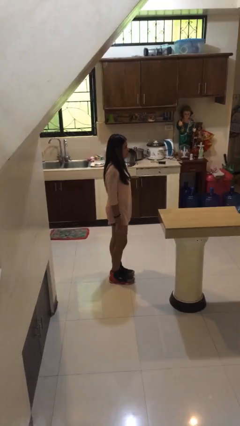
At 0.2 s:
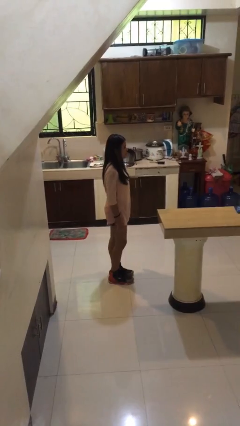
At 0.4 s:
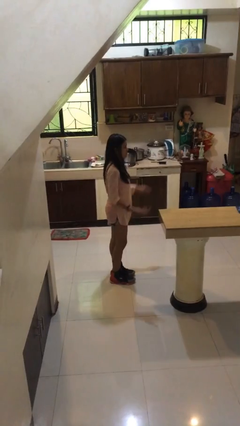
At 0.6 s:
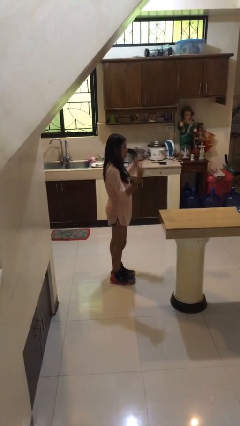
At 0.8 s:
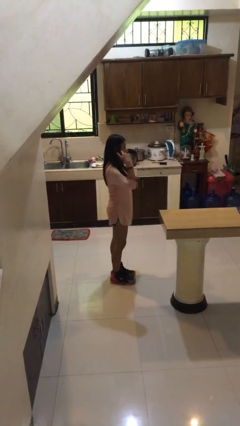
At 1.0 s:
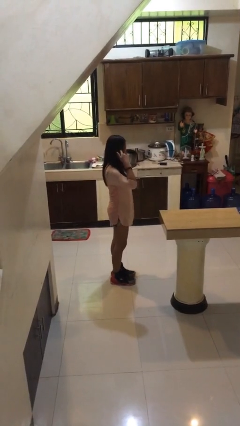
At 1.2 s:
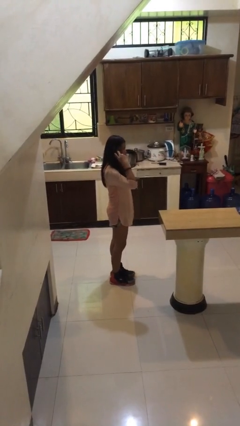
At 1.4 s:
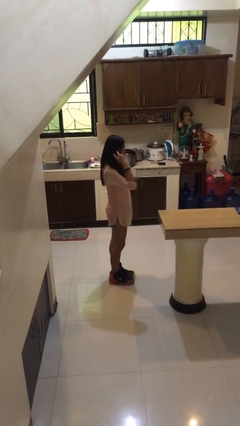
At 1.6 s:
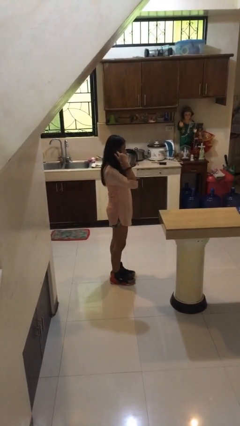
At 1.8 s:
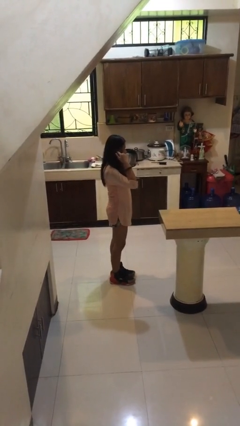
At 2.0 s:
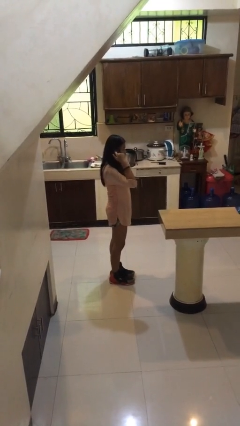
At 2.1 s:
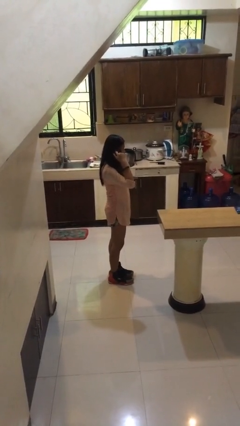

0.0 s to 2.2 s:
person puts fingers in ear

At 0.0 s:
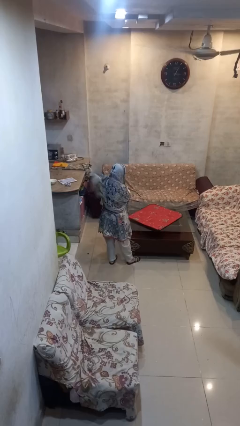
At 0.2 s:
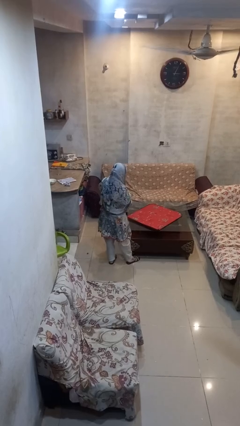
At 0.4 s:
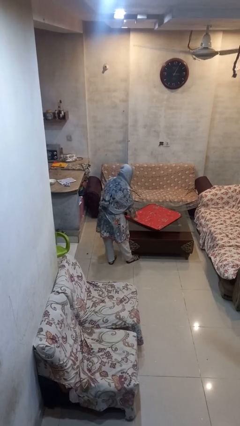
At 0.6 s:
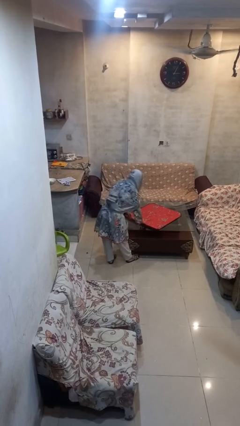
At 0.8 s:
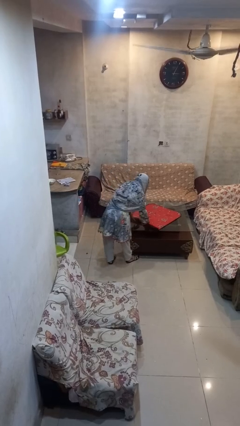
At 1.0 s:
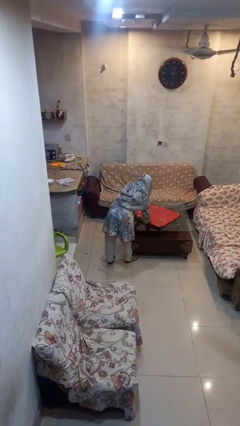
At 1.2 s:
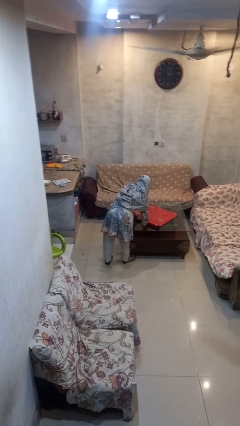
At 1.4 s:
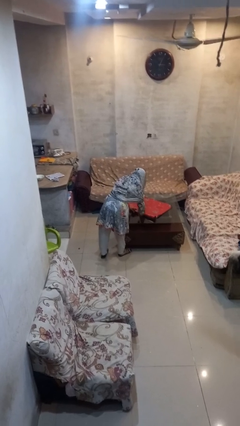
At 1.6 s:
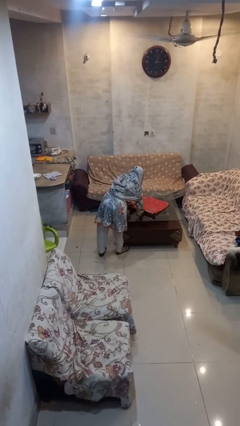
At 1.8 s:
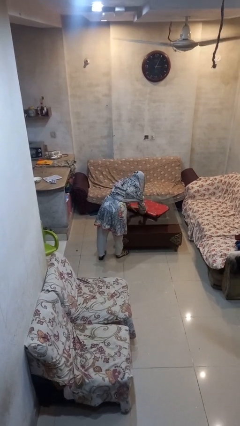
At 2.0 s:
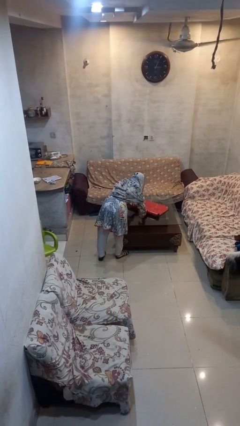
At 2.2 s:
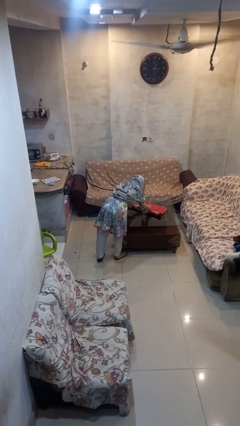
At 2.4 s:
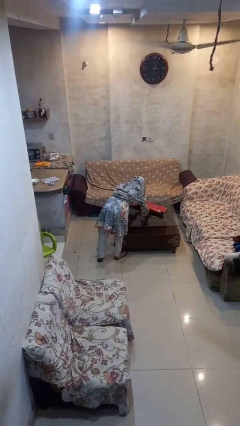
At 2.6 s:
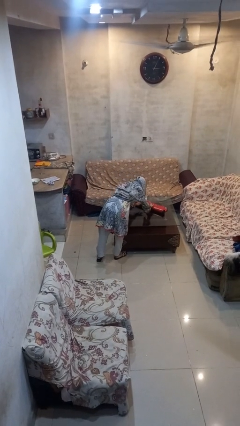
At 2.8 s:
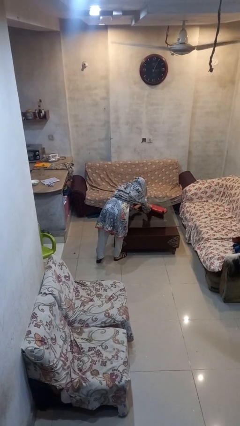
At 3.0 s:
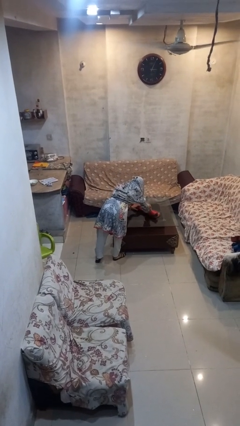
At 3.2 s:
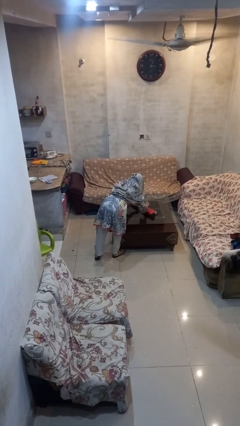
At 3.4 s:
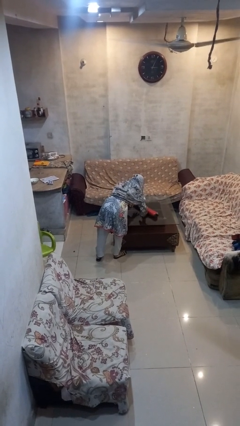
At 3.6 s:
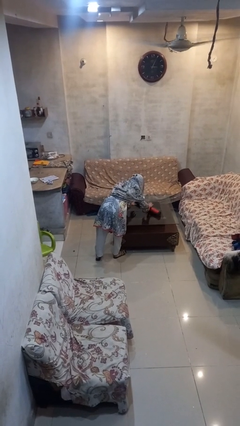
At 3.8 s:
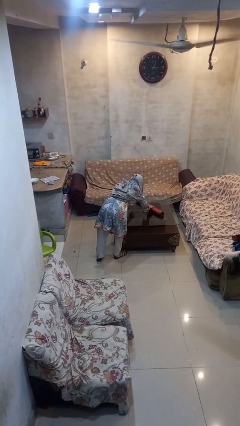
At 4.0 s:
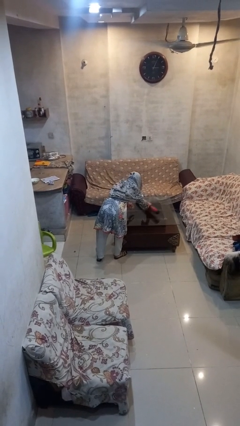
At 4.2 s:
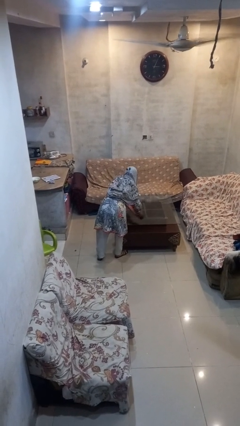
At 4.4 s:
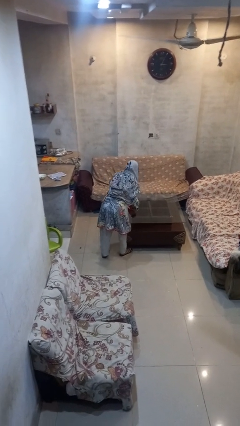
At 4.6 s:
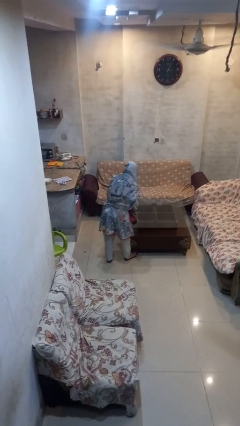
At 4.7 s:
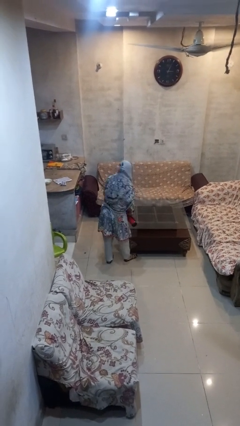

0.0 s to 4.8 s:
person folds tablecloth

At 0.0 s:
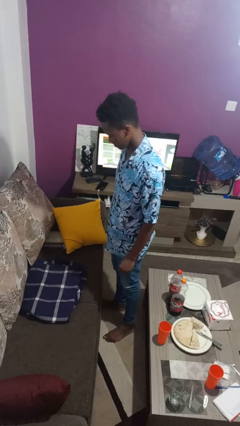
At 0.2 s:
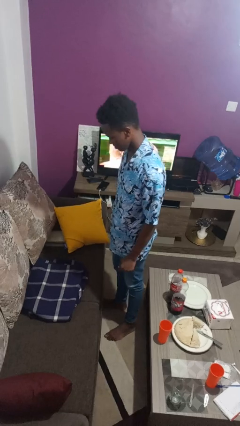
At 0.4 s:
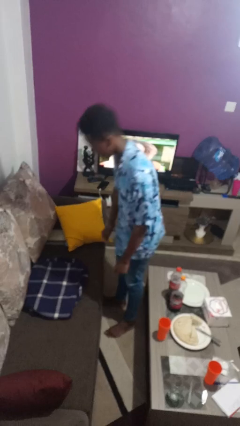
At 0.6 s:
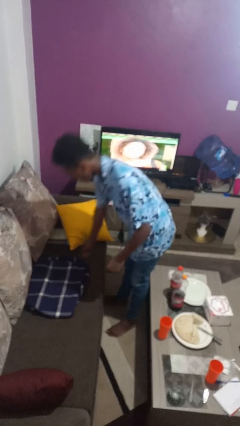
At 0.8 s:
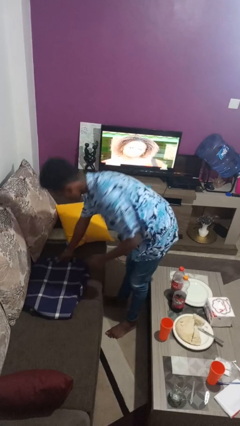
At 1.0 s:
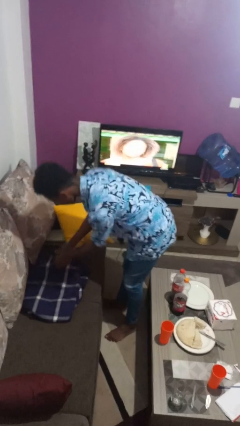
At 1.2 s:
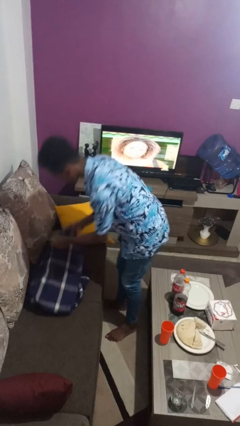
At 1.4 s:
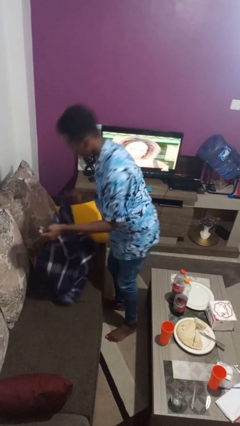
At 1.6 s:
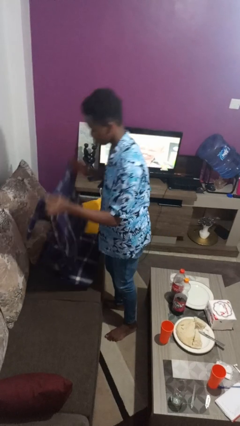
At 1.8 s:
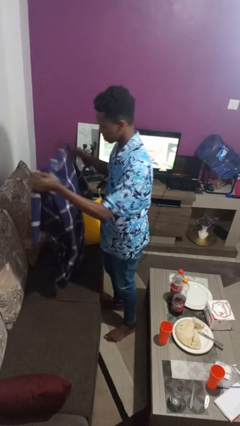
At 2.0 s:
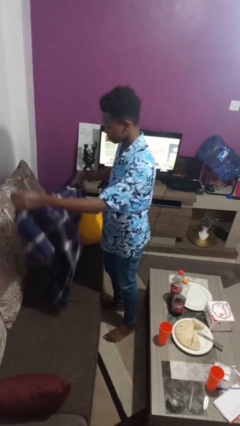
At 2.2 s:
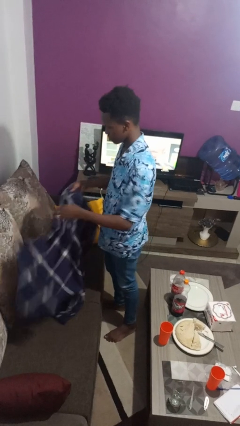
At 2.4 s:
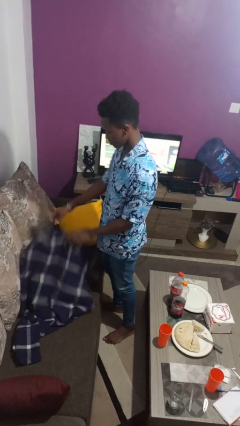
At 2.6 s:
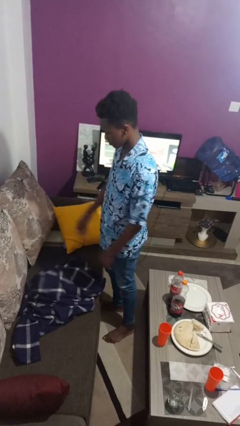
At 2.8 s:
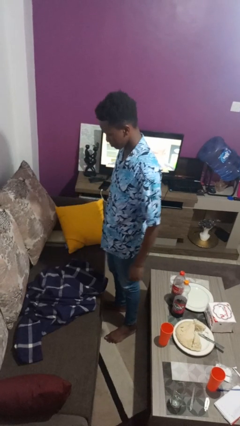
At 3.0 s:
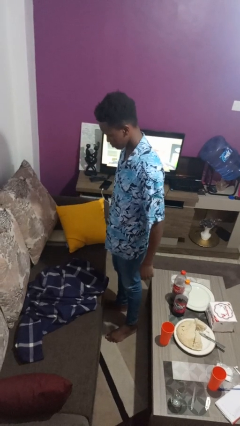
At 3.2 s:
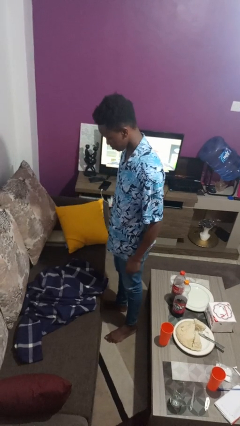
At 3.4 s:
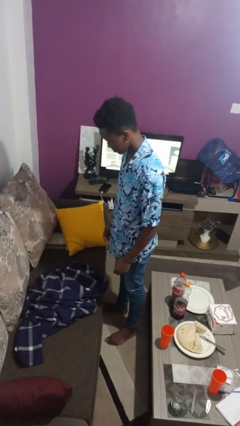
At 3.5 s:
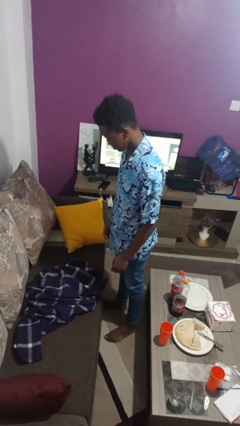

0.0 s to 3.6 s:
person unfolds blanket

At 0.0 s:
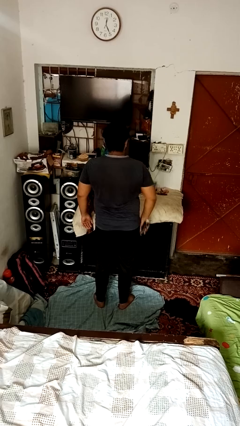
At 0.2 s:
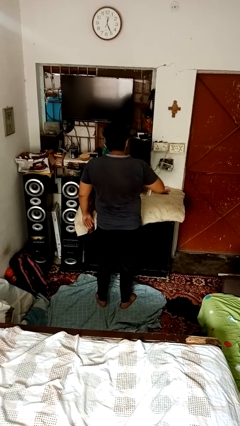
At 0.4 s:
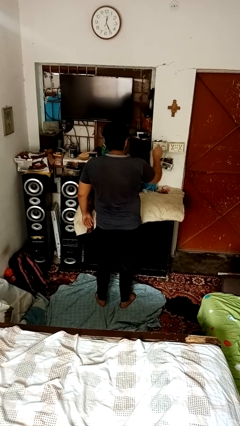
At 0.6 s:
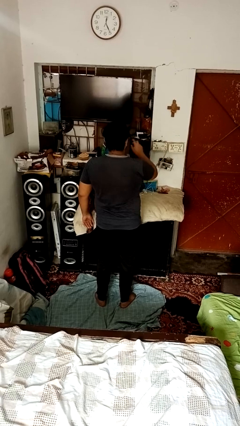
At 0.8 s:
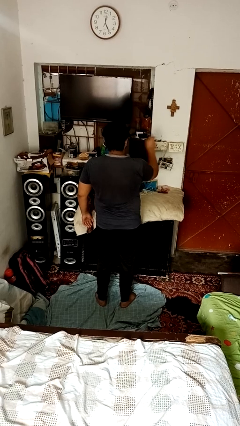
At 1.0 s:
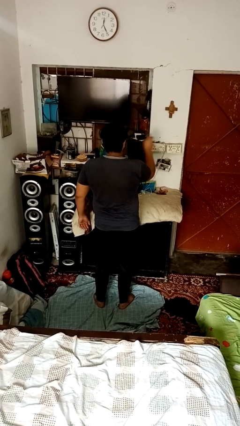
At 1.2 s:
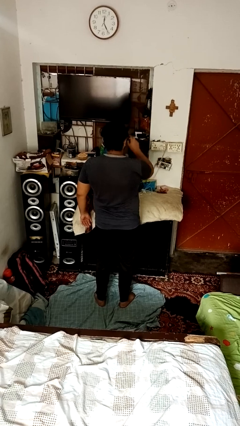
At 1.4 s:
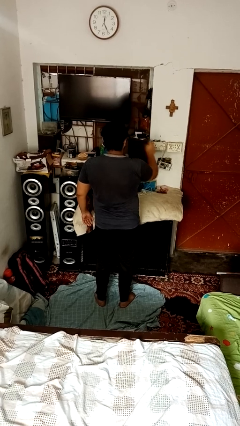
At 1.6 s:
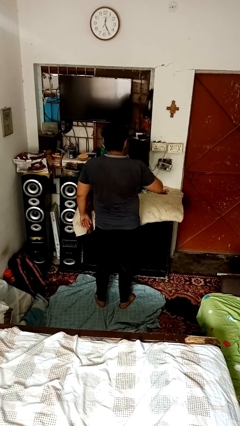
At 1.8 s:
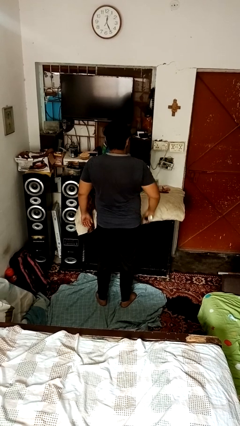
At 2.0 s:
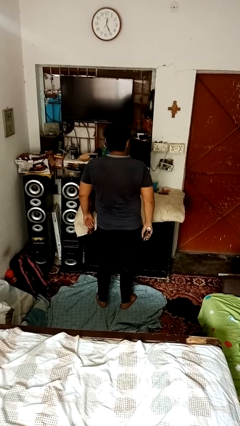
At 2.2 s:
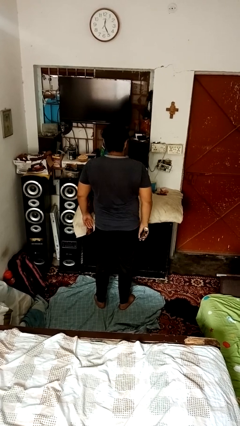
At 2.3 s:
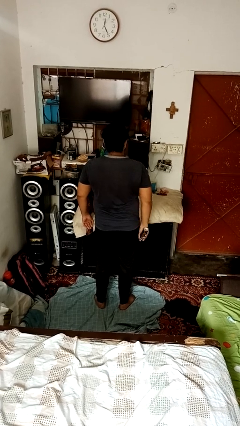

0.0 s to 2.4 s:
person sprays from bottle

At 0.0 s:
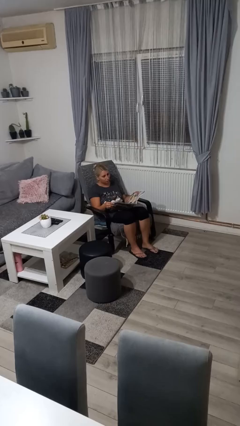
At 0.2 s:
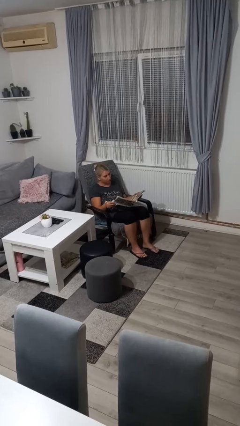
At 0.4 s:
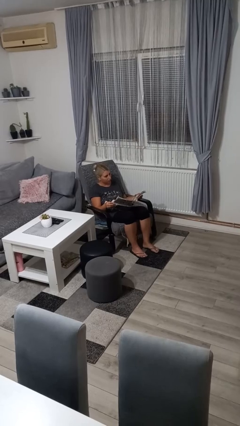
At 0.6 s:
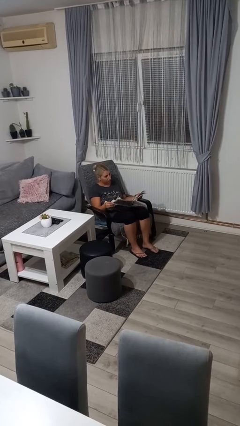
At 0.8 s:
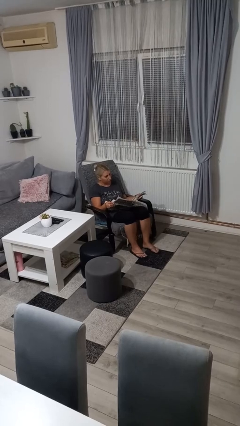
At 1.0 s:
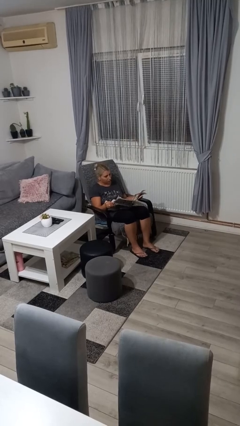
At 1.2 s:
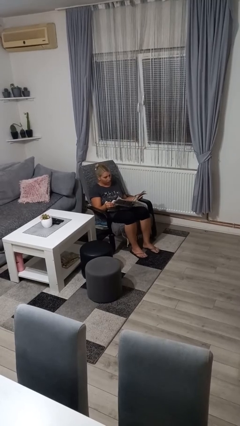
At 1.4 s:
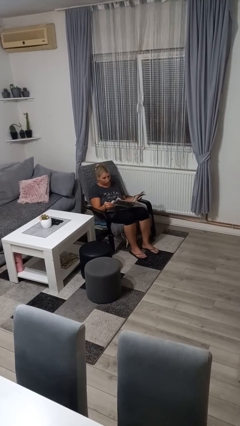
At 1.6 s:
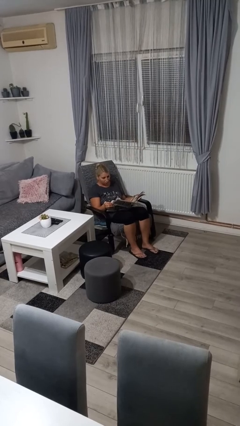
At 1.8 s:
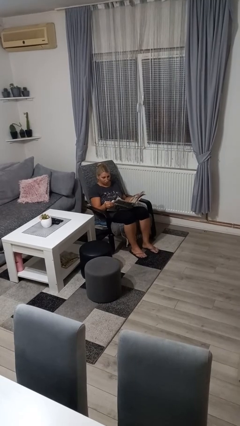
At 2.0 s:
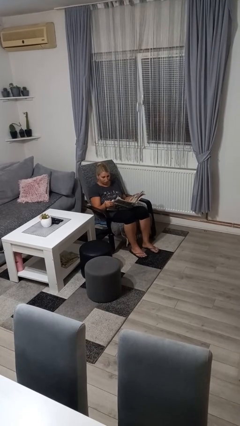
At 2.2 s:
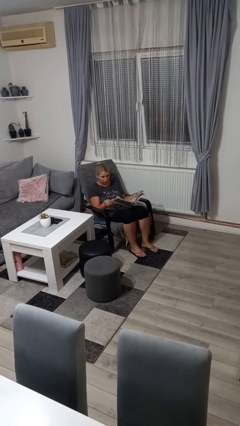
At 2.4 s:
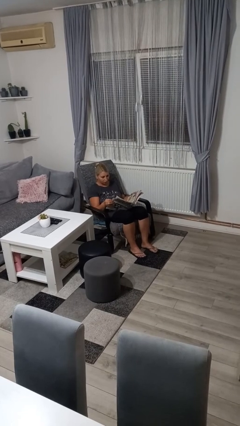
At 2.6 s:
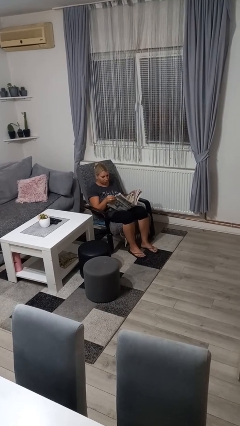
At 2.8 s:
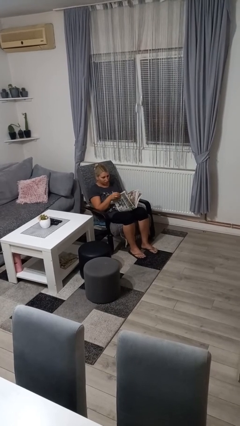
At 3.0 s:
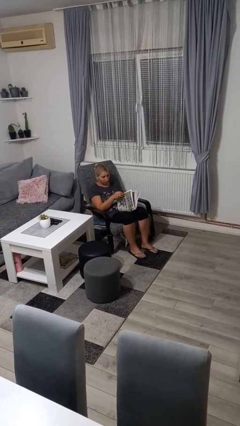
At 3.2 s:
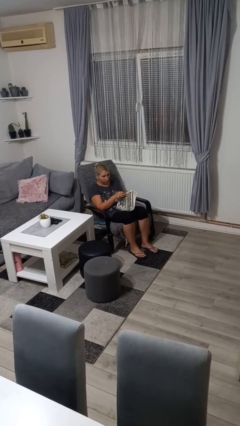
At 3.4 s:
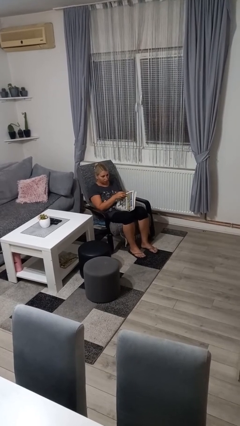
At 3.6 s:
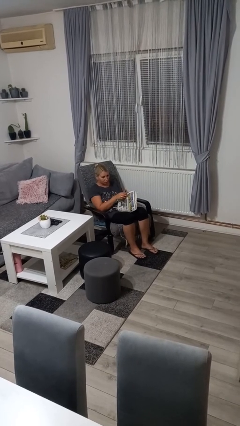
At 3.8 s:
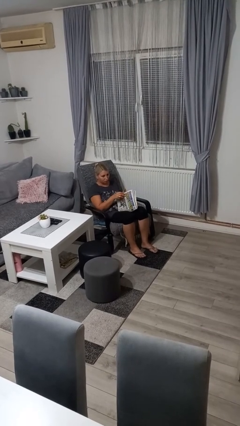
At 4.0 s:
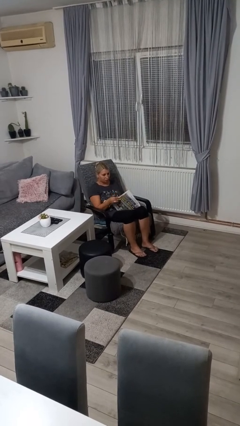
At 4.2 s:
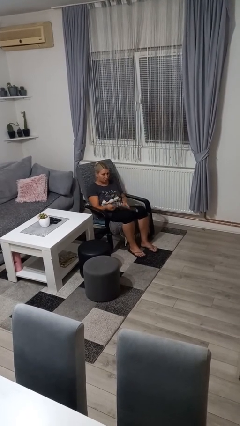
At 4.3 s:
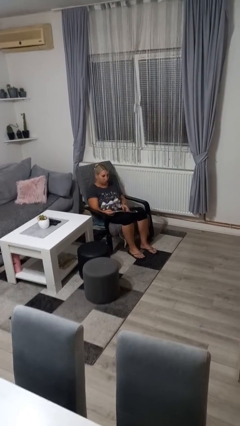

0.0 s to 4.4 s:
person reads newspaper
